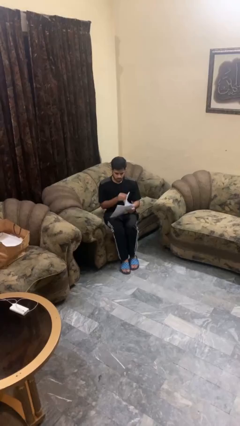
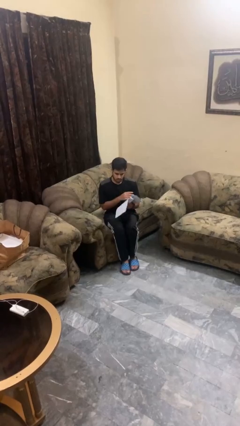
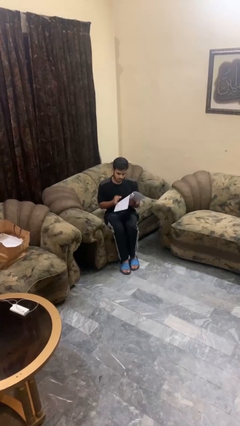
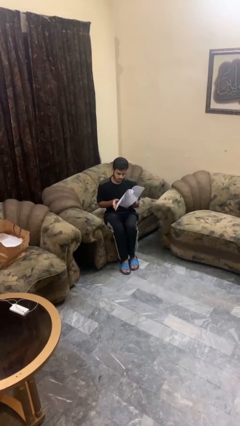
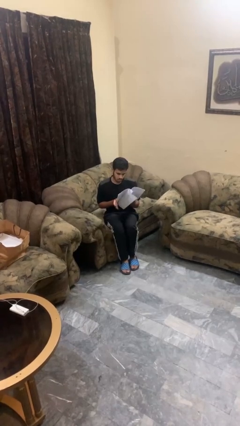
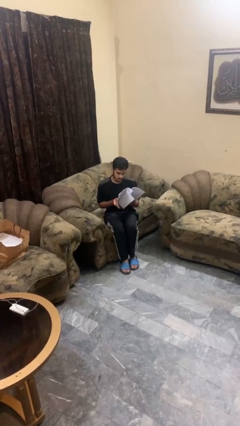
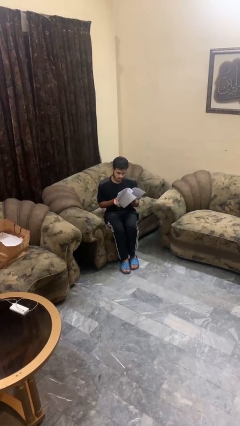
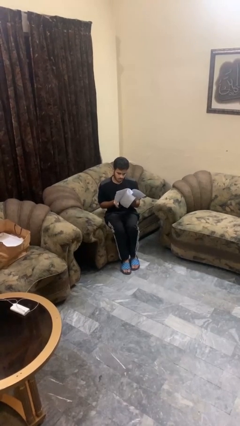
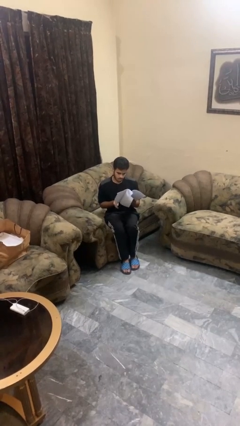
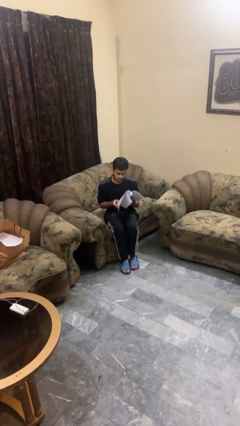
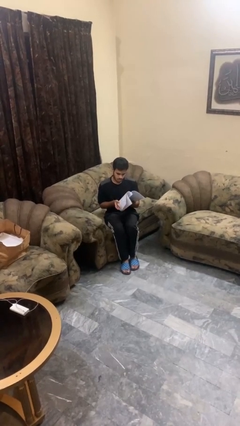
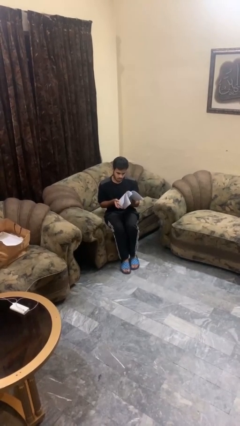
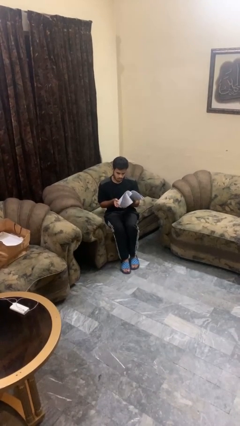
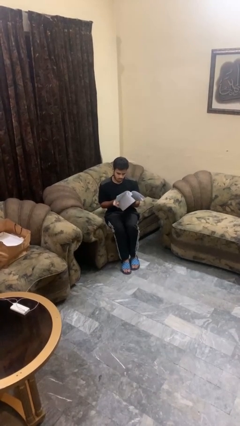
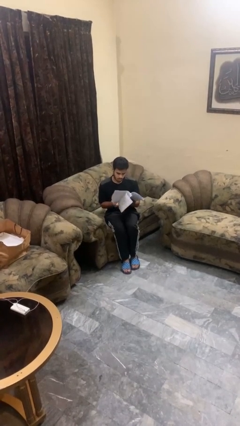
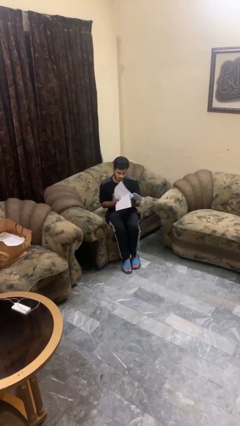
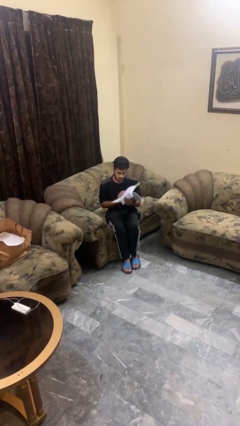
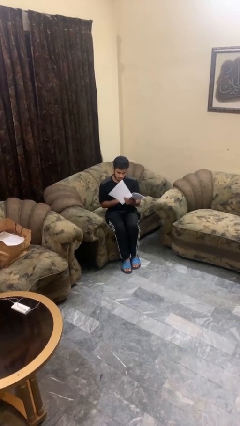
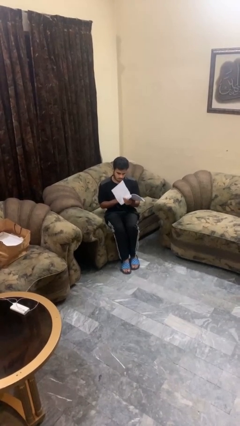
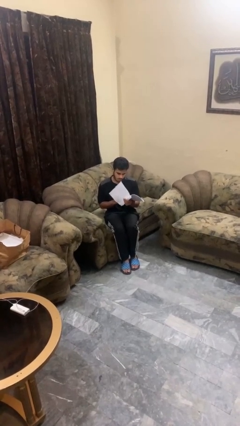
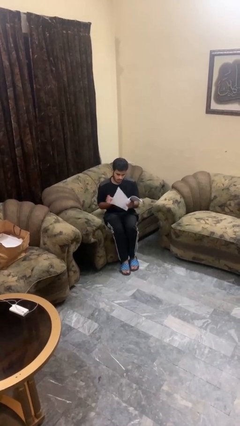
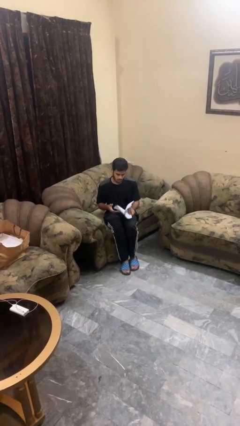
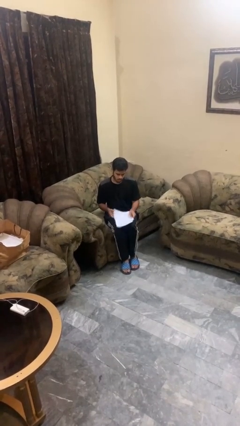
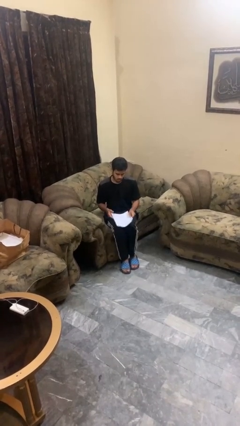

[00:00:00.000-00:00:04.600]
person reads magazine

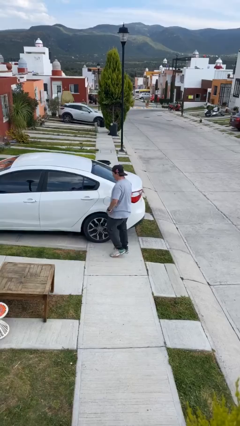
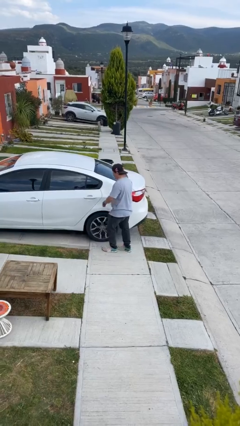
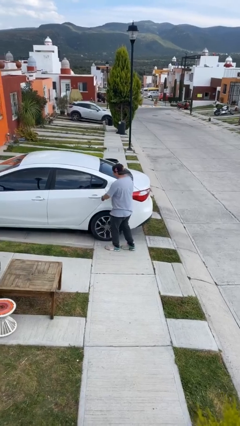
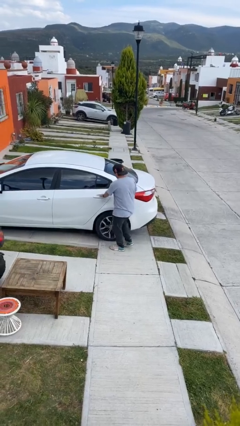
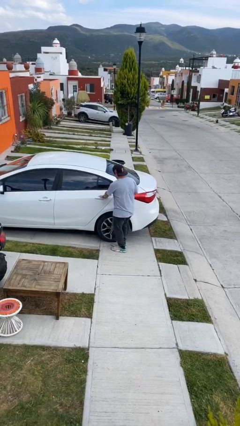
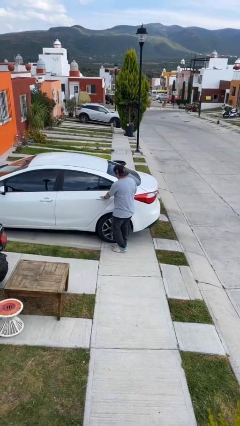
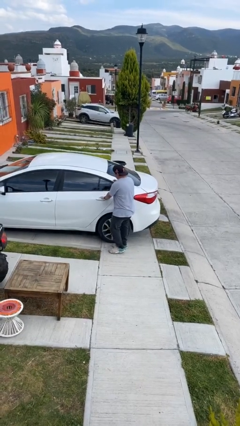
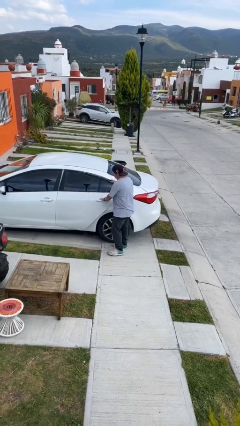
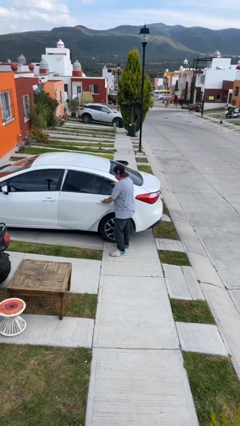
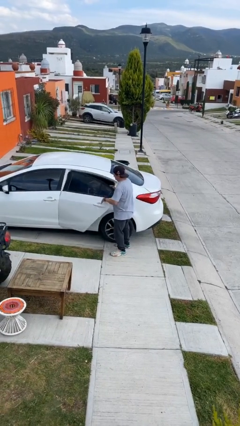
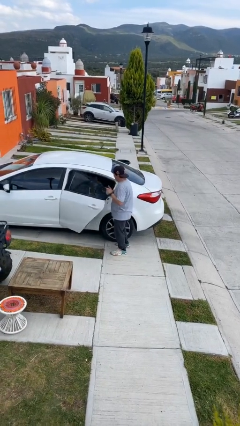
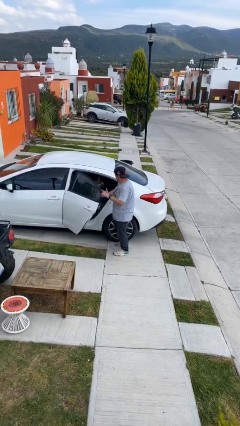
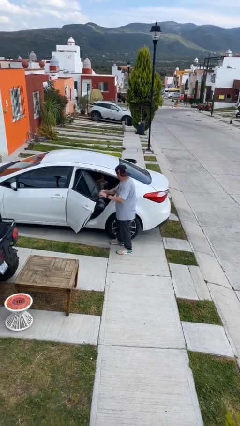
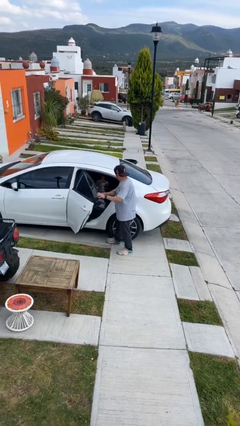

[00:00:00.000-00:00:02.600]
person opens car door

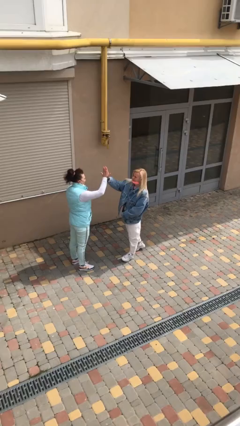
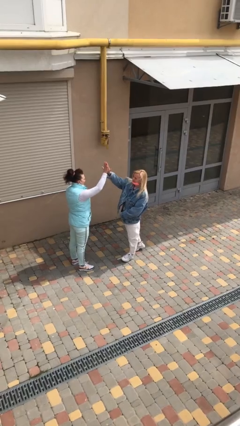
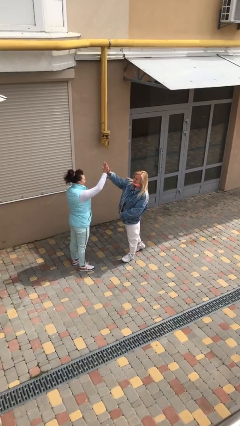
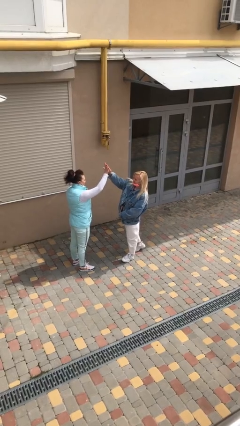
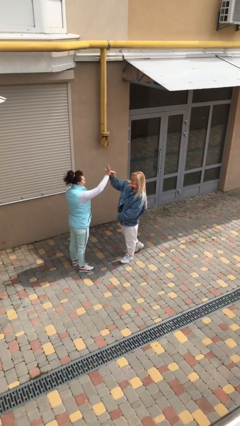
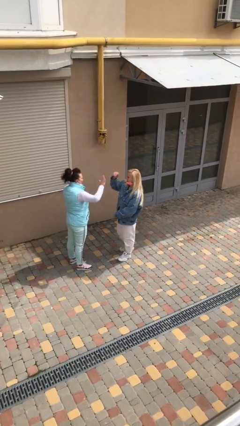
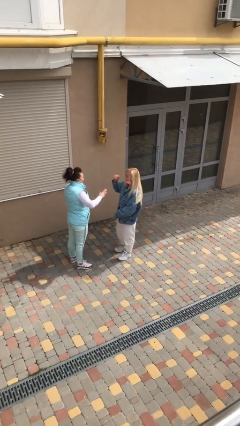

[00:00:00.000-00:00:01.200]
person highfives hand

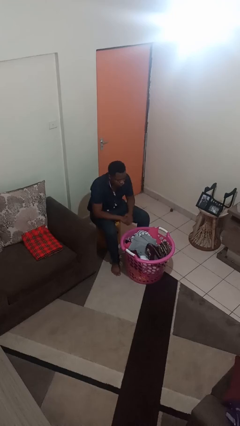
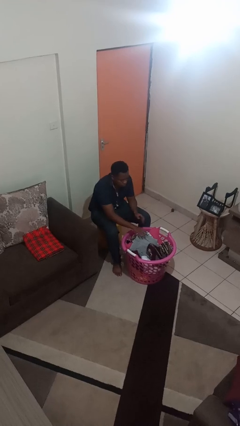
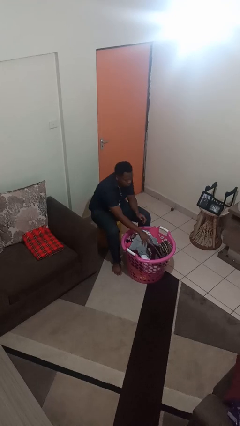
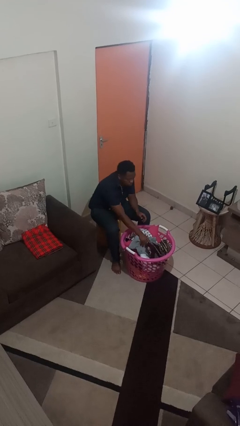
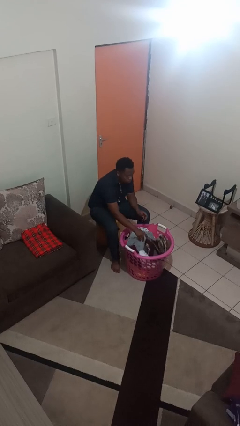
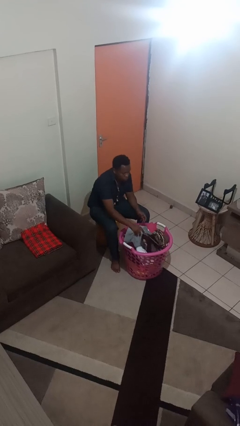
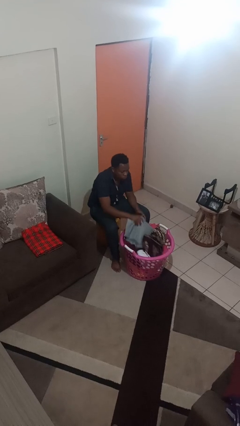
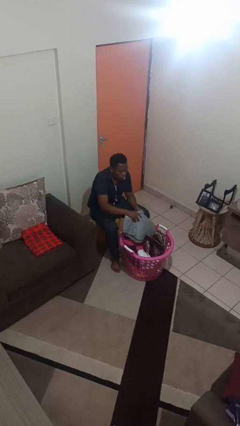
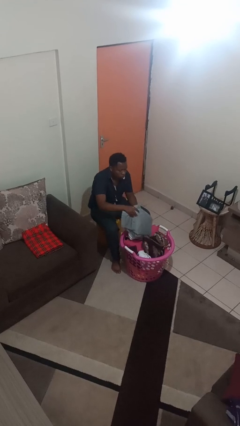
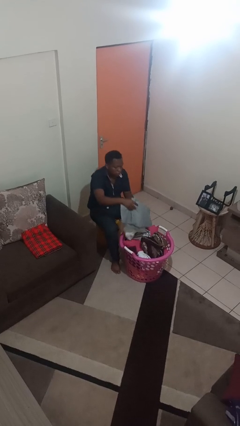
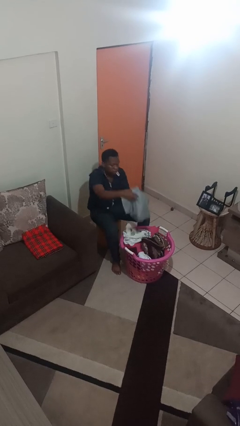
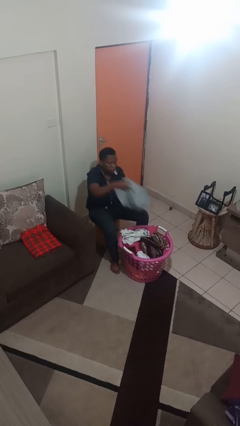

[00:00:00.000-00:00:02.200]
person takes object from basket

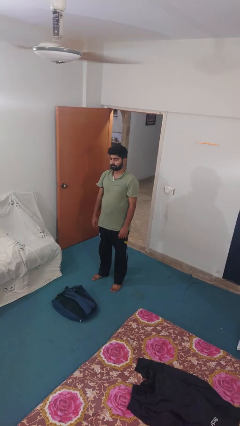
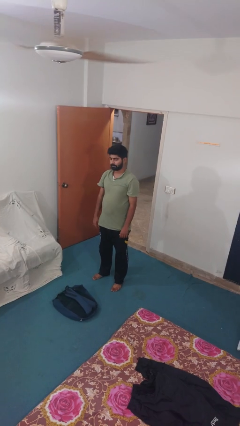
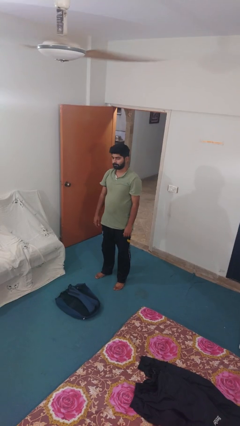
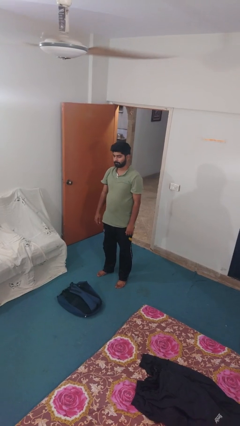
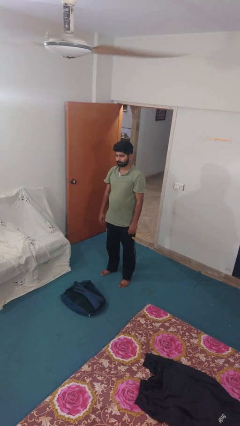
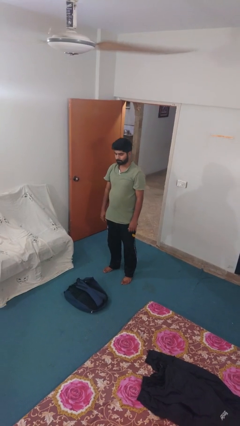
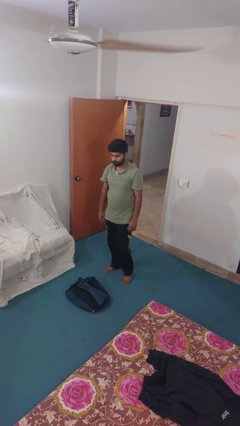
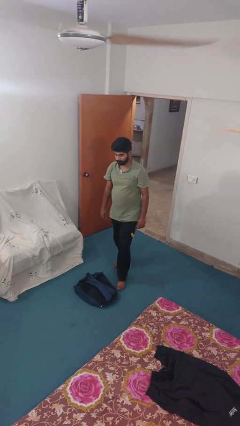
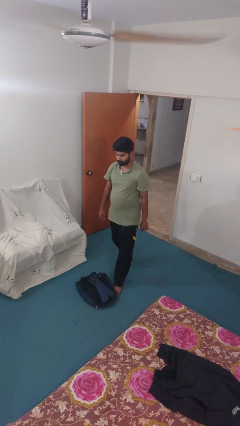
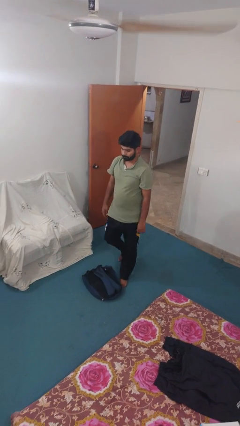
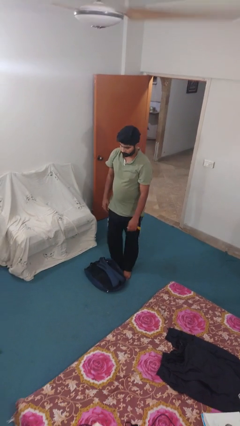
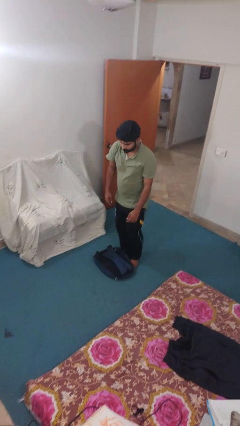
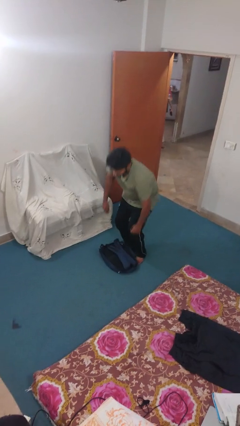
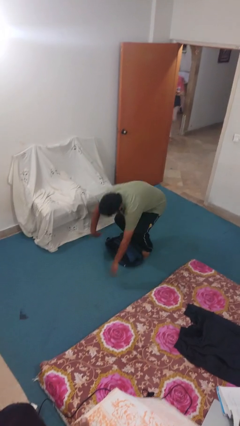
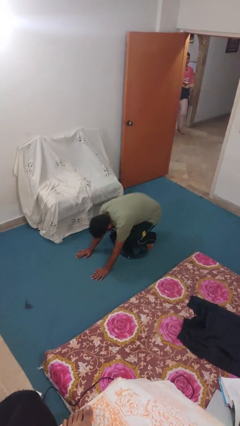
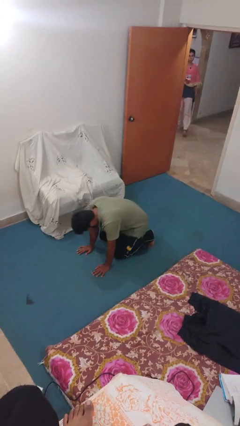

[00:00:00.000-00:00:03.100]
person trips on object on floor

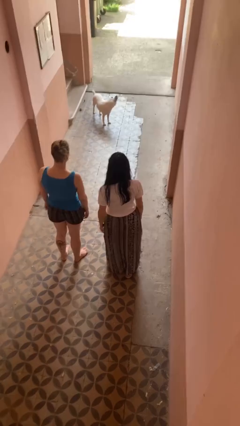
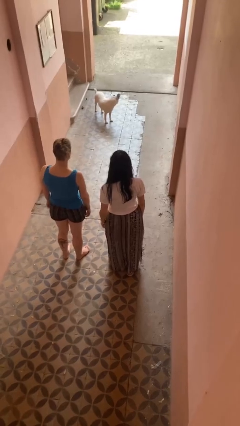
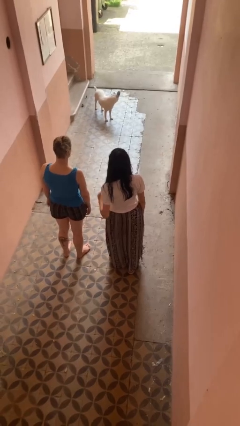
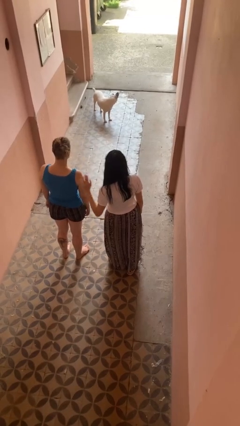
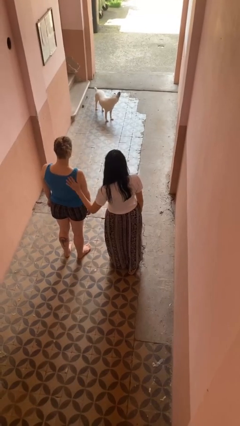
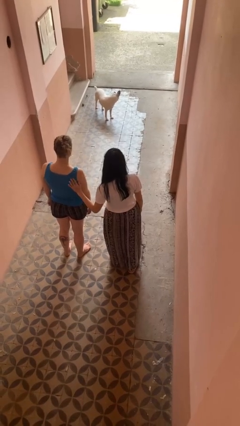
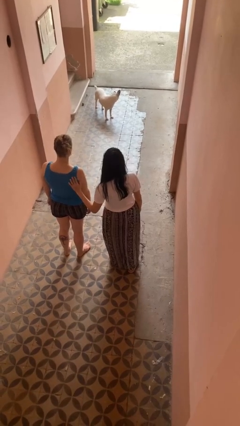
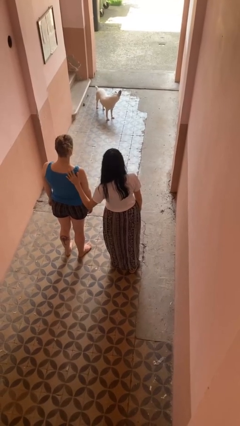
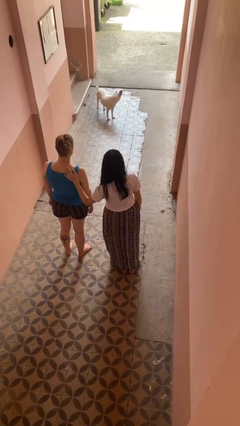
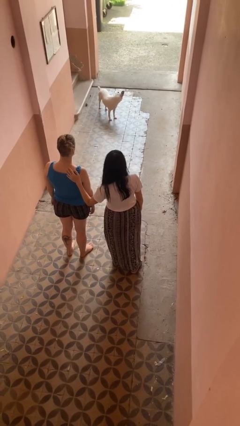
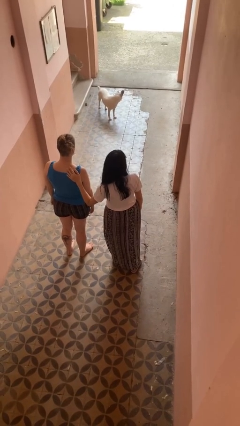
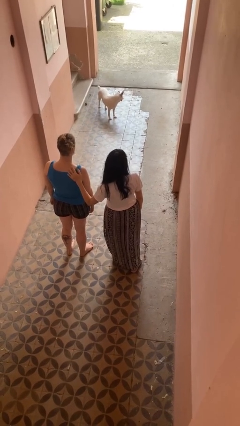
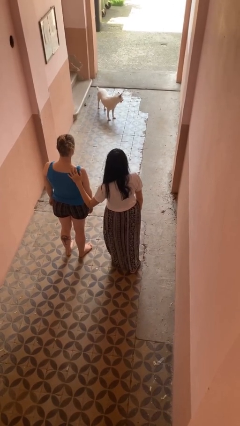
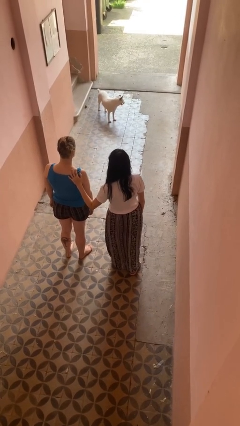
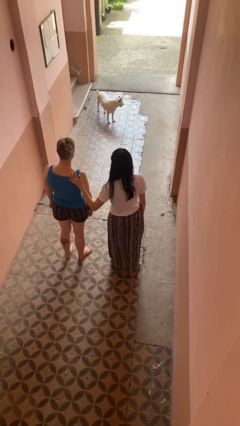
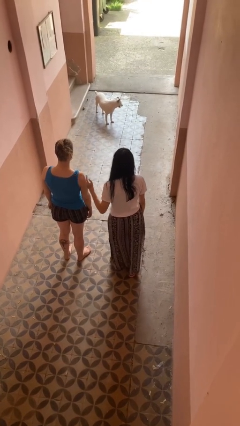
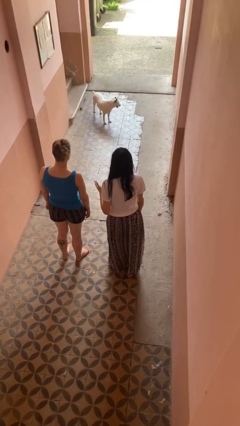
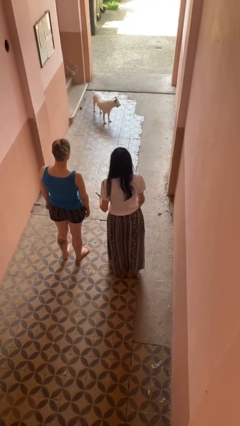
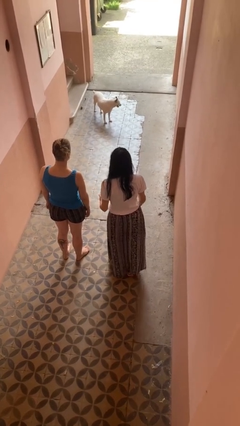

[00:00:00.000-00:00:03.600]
person touches back of person
